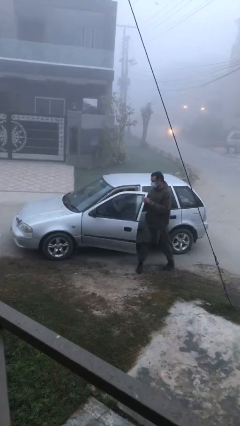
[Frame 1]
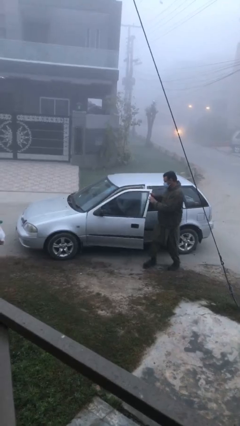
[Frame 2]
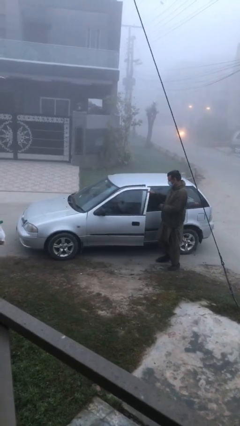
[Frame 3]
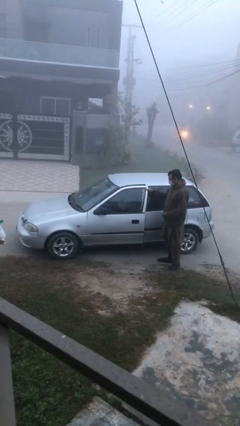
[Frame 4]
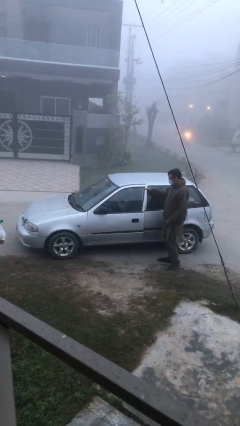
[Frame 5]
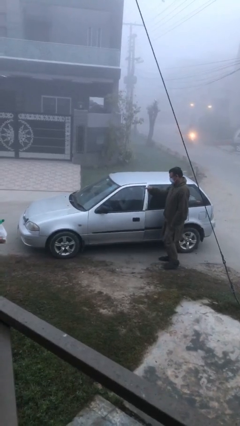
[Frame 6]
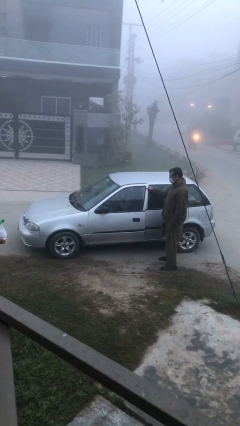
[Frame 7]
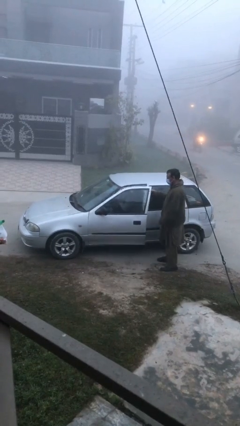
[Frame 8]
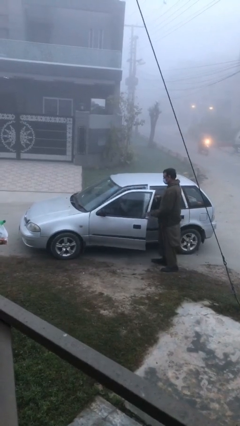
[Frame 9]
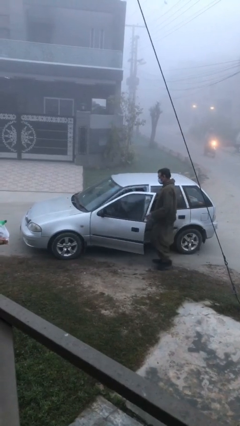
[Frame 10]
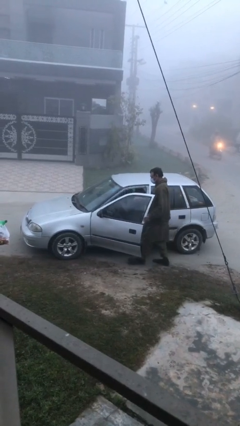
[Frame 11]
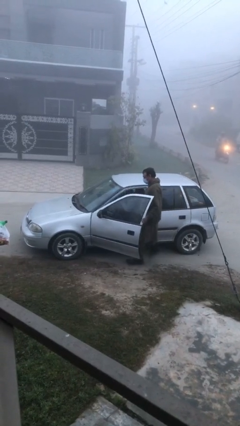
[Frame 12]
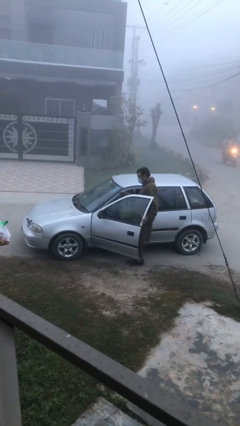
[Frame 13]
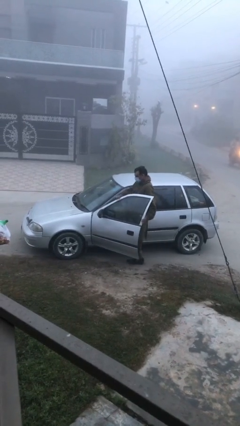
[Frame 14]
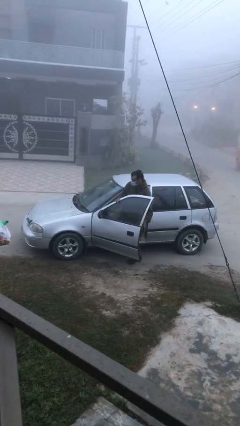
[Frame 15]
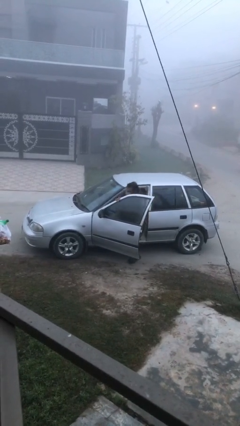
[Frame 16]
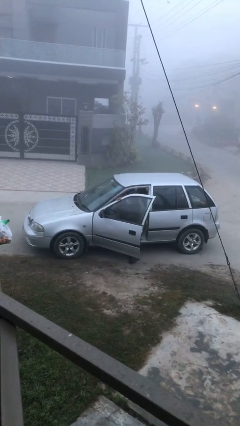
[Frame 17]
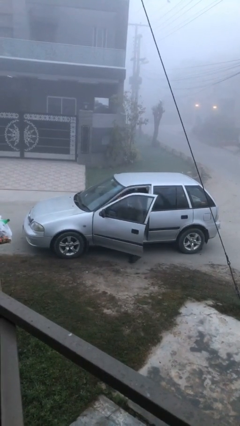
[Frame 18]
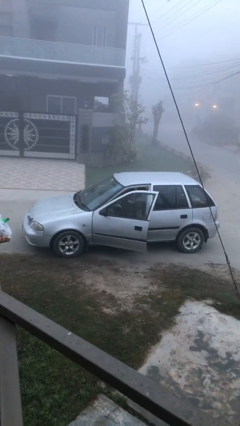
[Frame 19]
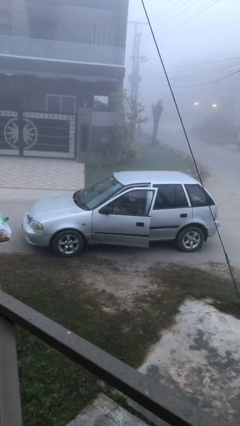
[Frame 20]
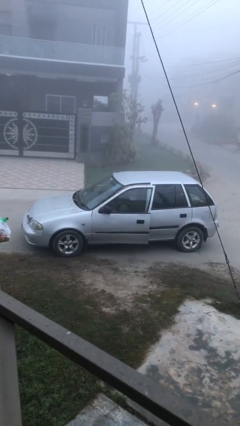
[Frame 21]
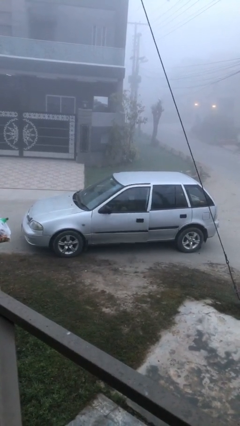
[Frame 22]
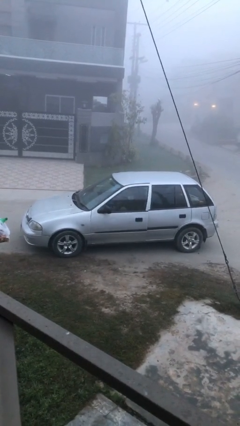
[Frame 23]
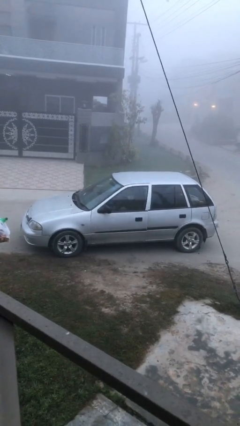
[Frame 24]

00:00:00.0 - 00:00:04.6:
car picks up person

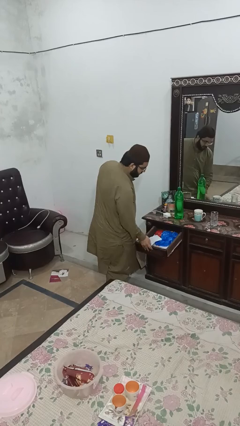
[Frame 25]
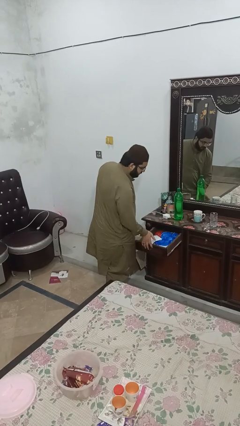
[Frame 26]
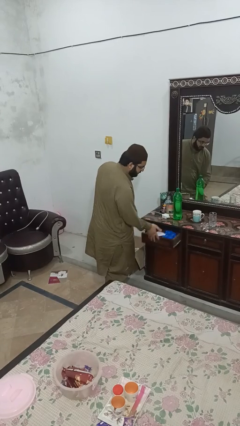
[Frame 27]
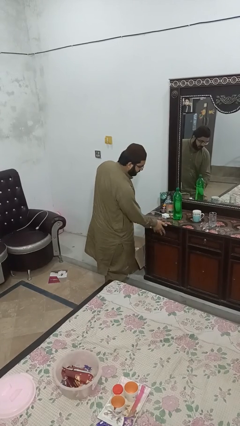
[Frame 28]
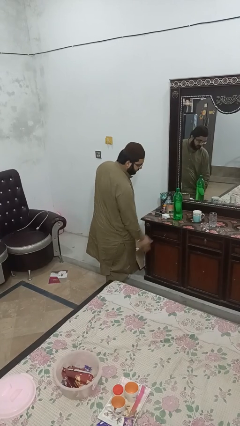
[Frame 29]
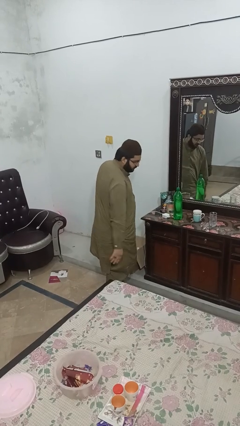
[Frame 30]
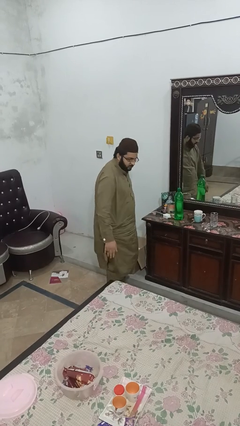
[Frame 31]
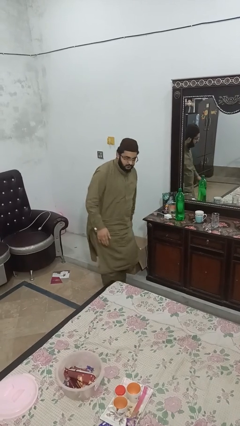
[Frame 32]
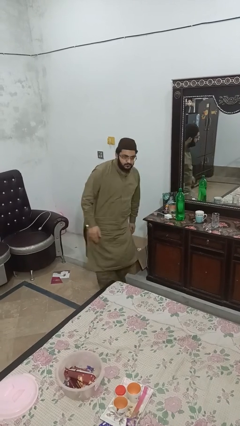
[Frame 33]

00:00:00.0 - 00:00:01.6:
person closes dresser drawer

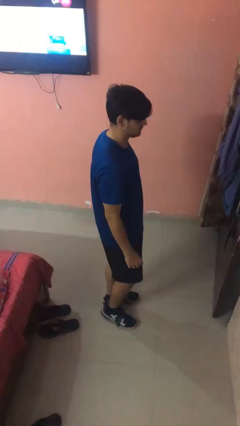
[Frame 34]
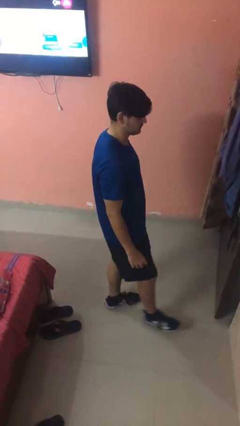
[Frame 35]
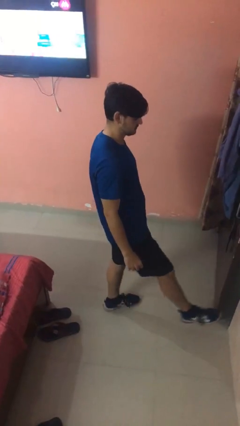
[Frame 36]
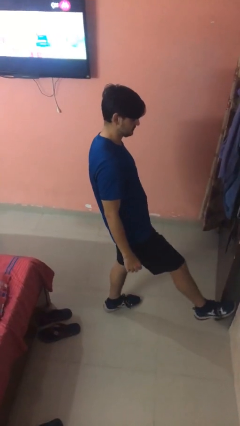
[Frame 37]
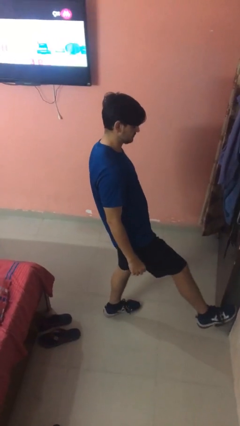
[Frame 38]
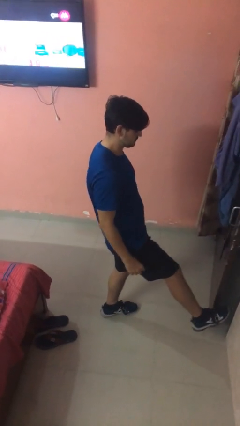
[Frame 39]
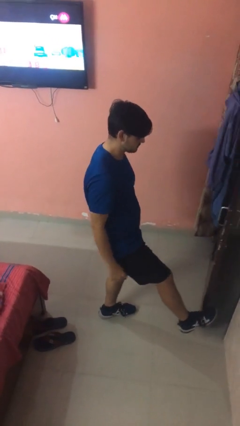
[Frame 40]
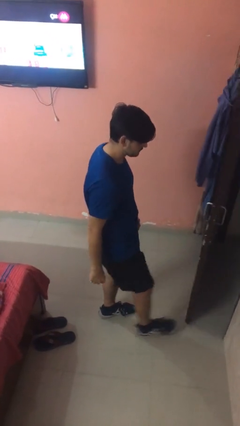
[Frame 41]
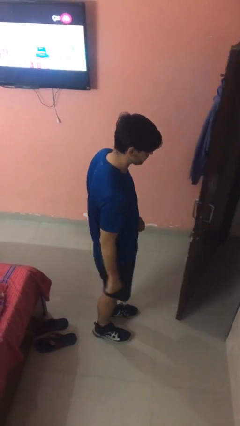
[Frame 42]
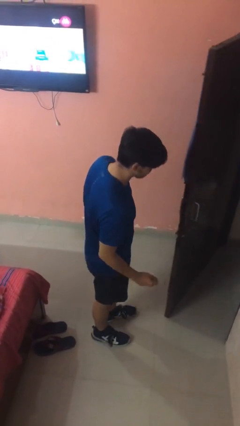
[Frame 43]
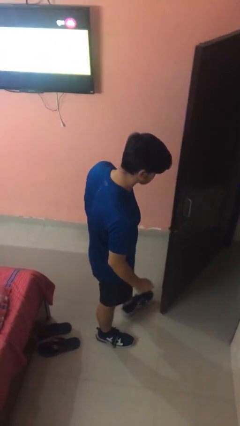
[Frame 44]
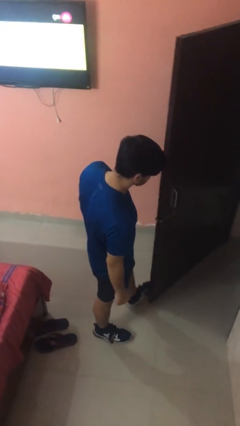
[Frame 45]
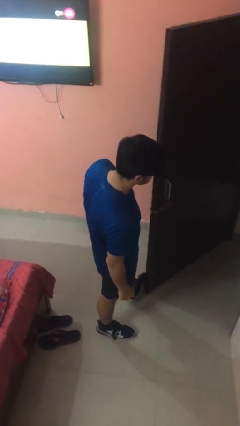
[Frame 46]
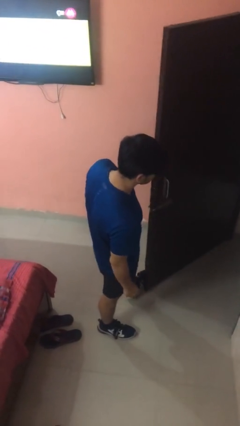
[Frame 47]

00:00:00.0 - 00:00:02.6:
person opens facility door

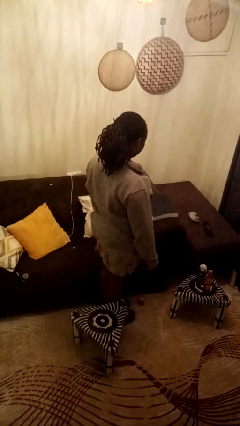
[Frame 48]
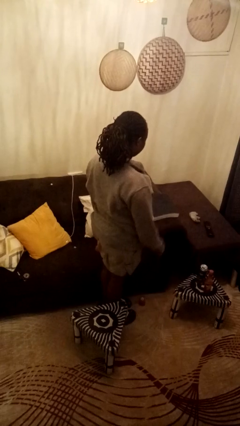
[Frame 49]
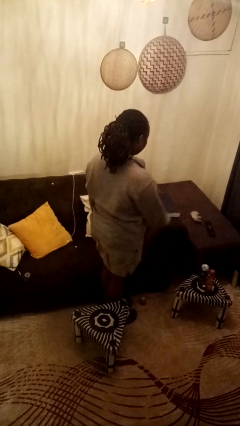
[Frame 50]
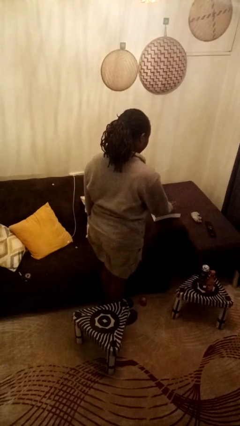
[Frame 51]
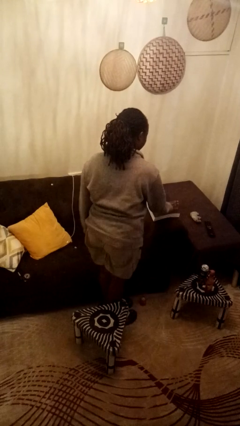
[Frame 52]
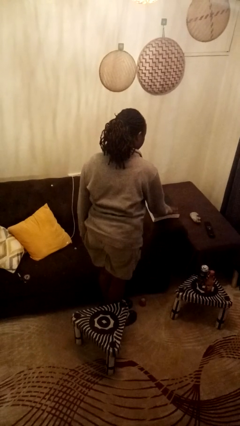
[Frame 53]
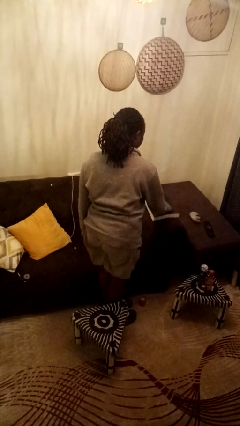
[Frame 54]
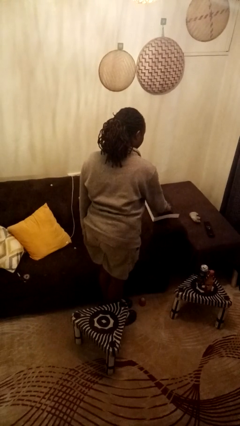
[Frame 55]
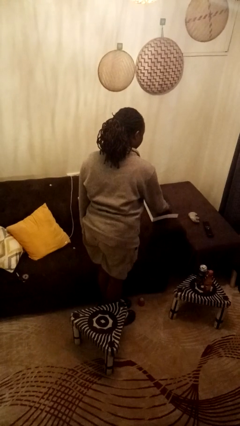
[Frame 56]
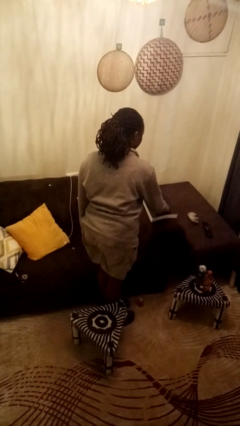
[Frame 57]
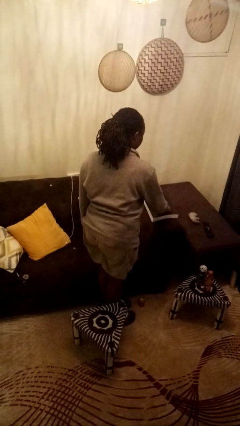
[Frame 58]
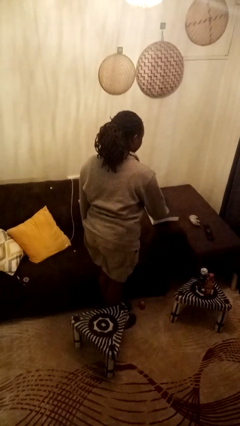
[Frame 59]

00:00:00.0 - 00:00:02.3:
person taps object with finger

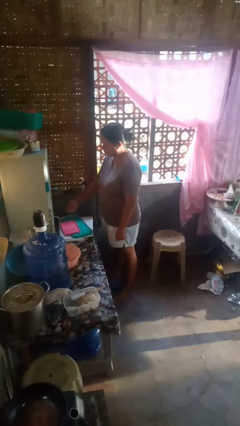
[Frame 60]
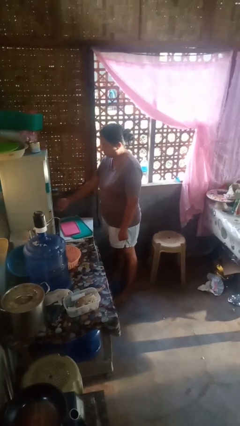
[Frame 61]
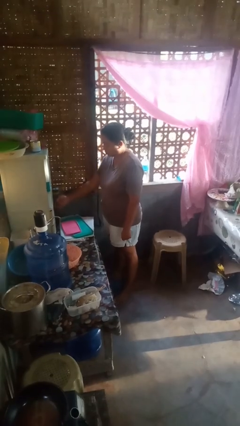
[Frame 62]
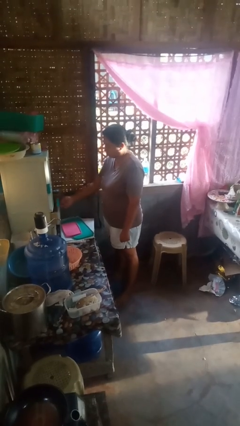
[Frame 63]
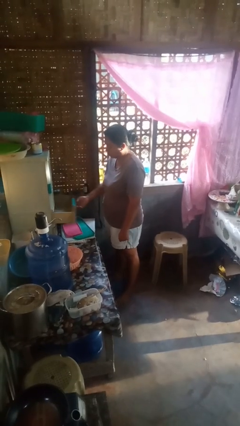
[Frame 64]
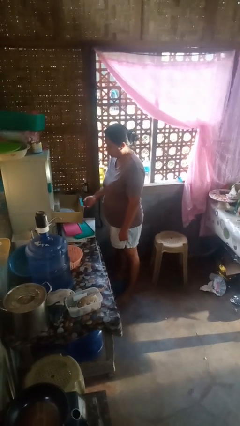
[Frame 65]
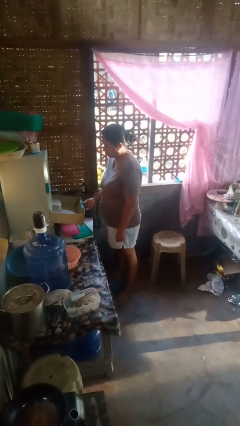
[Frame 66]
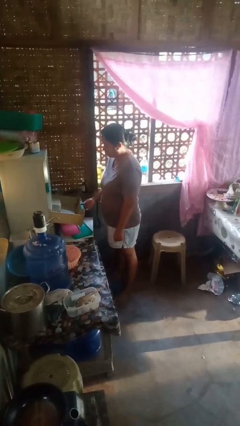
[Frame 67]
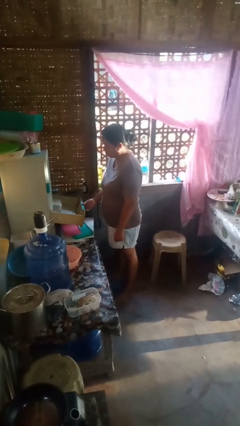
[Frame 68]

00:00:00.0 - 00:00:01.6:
person opens kitchen drawer

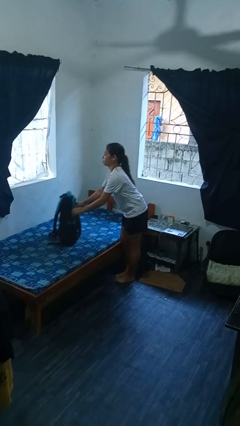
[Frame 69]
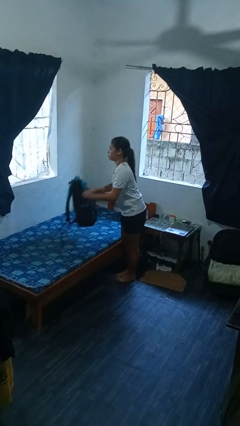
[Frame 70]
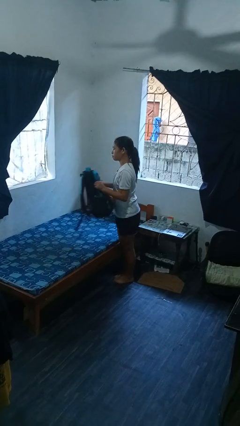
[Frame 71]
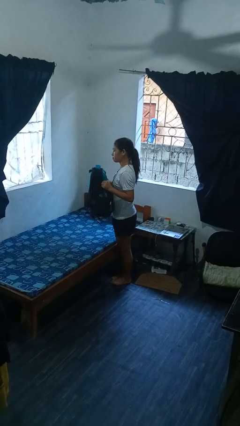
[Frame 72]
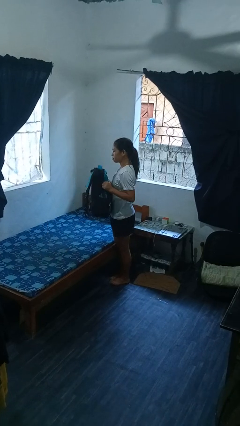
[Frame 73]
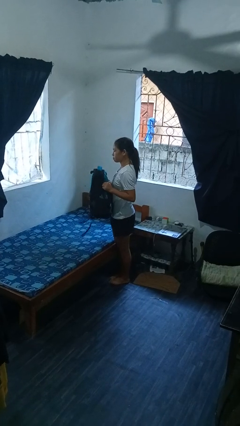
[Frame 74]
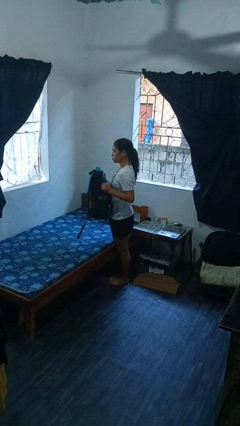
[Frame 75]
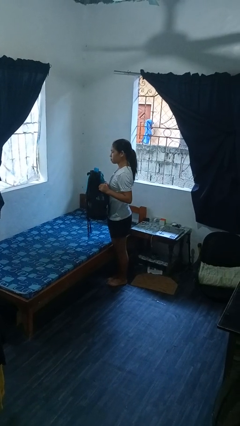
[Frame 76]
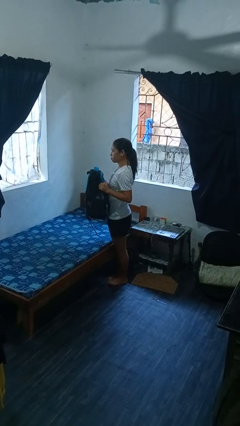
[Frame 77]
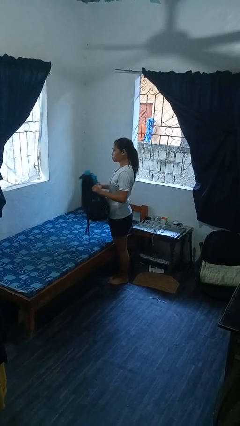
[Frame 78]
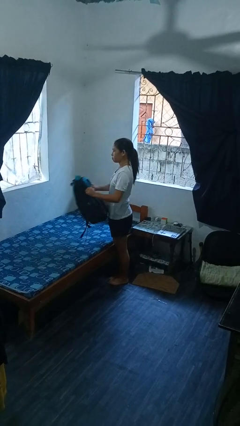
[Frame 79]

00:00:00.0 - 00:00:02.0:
person picks up object from bed

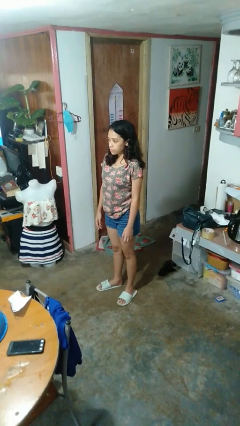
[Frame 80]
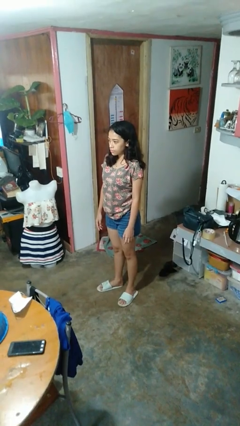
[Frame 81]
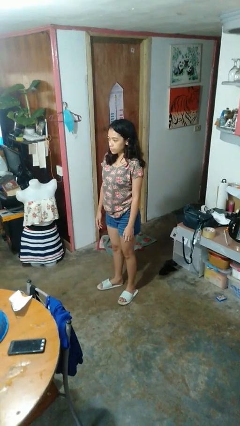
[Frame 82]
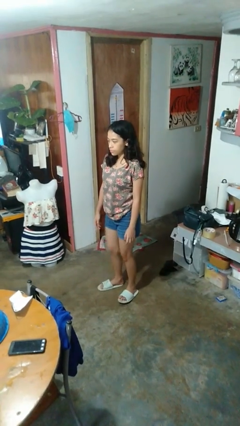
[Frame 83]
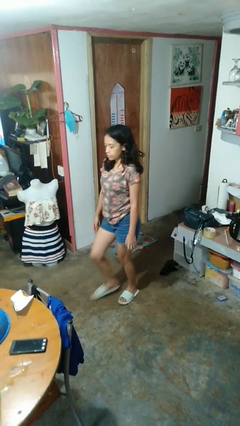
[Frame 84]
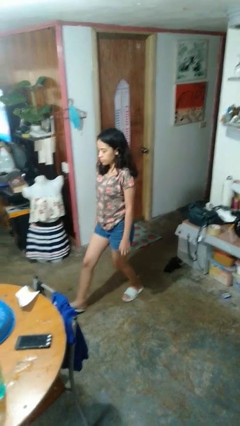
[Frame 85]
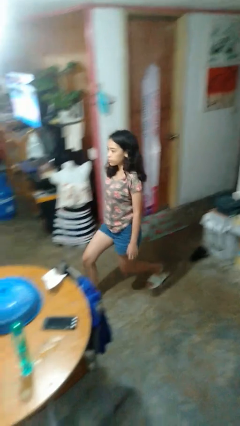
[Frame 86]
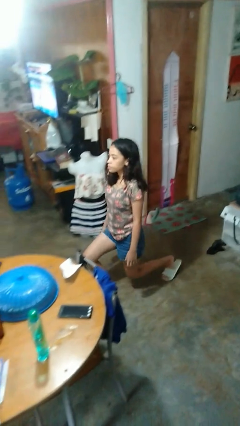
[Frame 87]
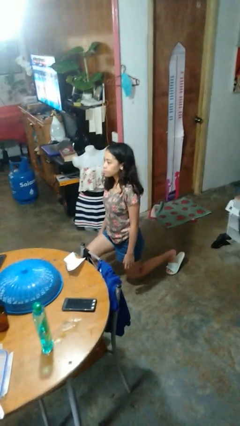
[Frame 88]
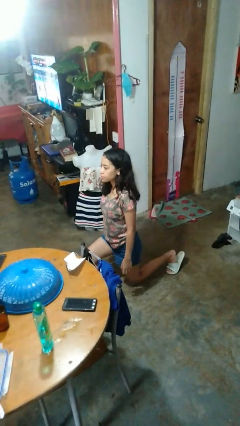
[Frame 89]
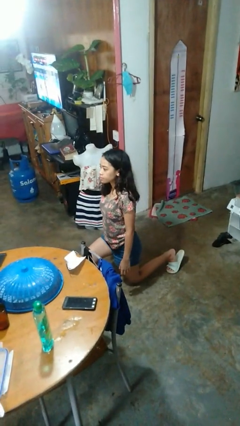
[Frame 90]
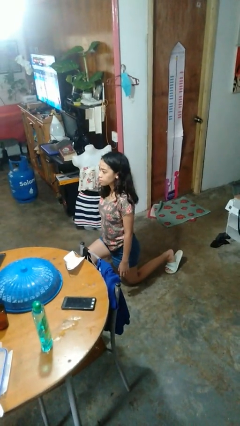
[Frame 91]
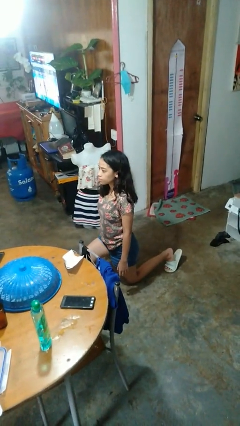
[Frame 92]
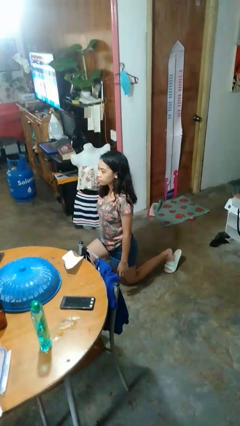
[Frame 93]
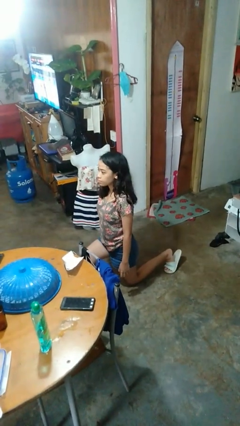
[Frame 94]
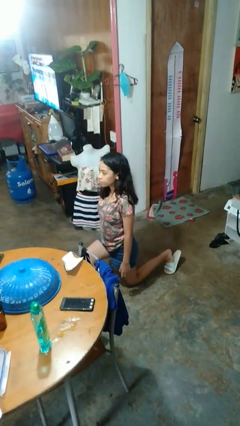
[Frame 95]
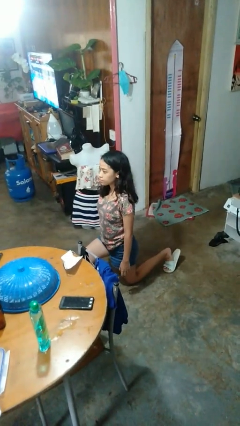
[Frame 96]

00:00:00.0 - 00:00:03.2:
person kneels
